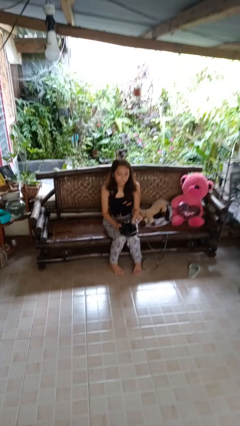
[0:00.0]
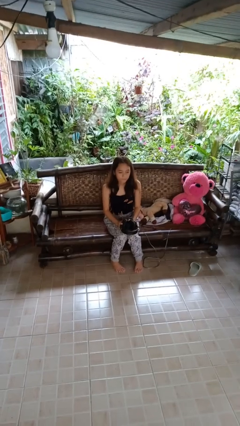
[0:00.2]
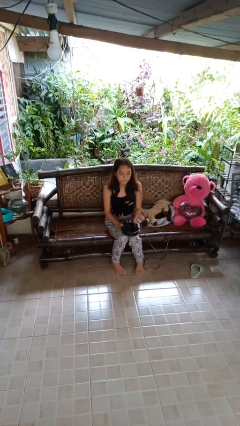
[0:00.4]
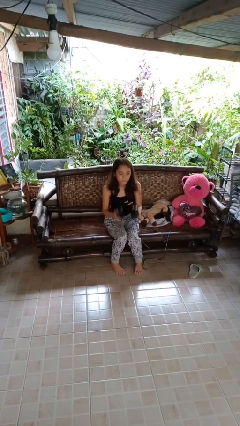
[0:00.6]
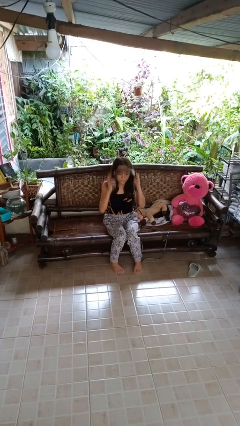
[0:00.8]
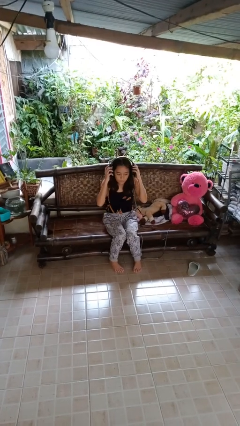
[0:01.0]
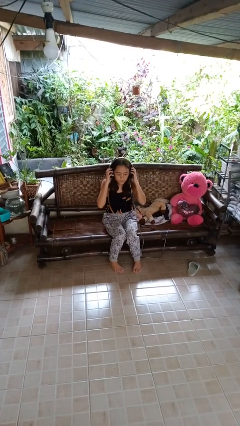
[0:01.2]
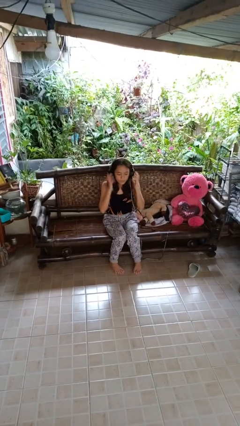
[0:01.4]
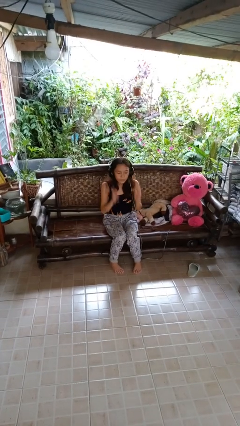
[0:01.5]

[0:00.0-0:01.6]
person puts on headphones

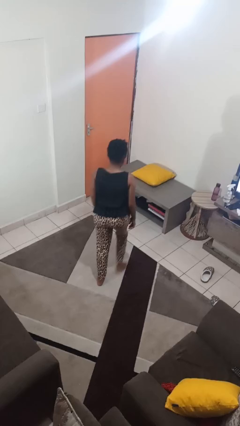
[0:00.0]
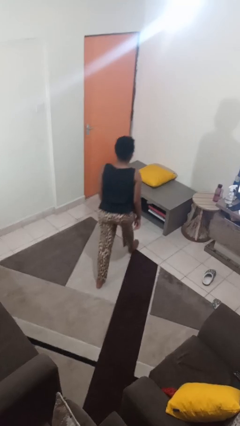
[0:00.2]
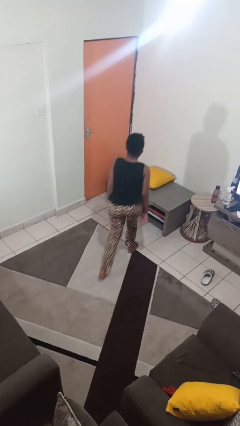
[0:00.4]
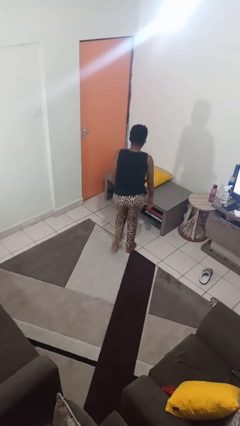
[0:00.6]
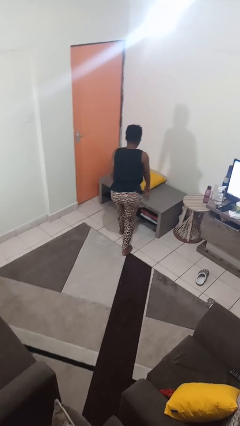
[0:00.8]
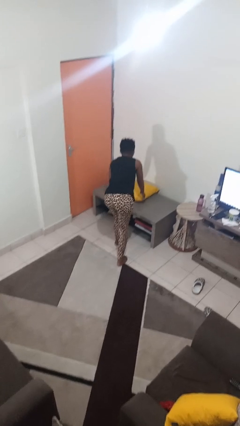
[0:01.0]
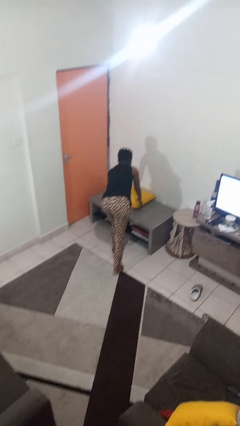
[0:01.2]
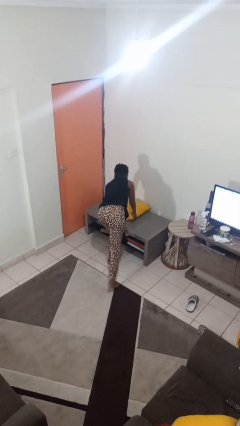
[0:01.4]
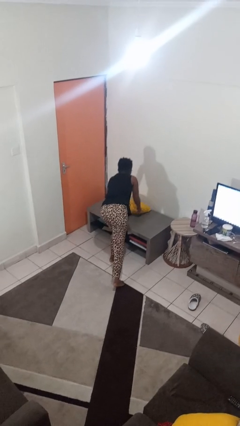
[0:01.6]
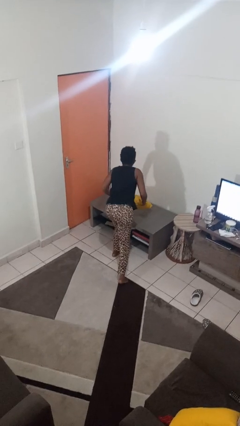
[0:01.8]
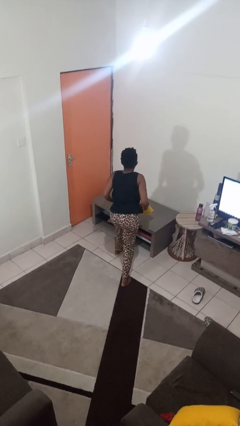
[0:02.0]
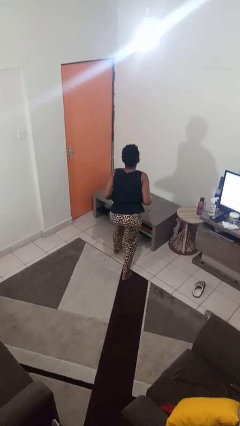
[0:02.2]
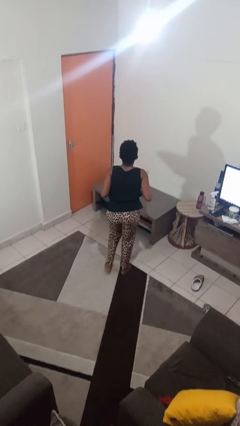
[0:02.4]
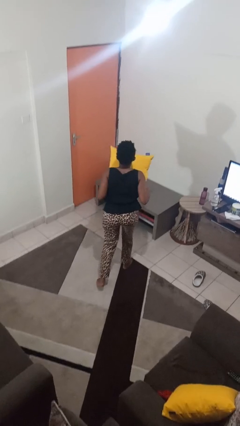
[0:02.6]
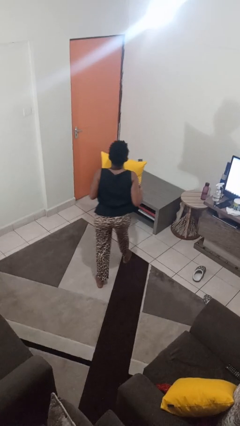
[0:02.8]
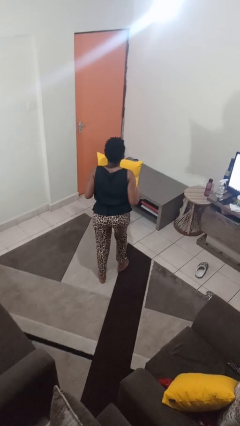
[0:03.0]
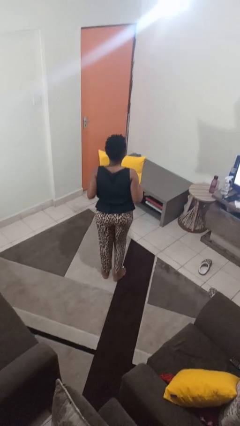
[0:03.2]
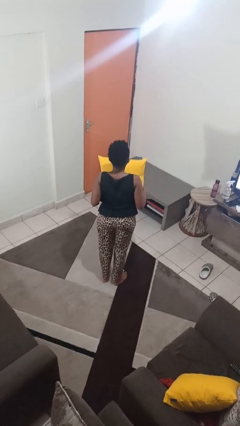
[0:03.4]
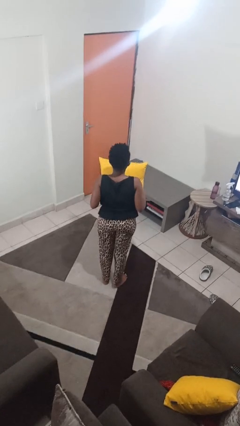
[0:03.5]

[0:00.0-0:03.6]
person picks up object from table

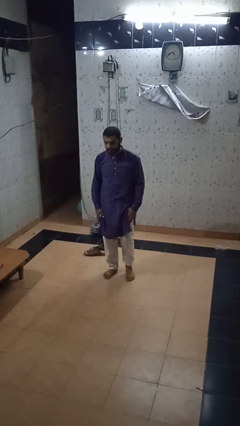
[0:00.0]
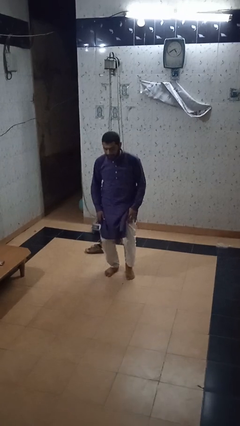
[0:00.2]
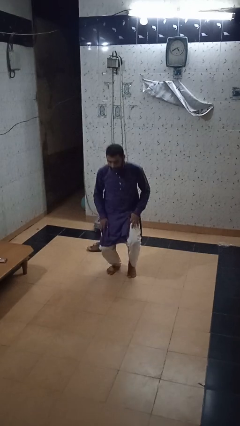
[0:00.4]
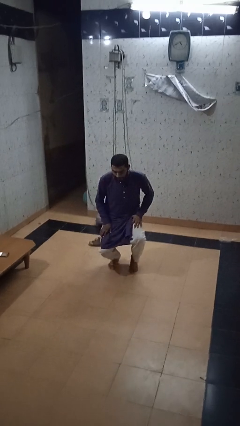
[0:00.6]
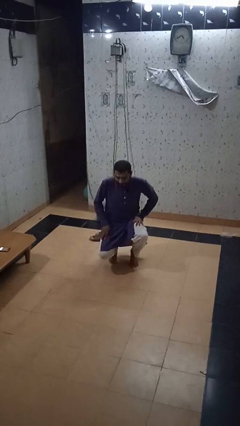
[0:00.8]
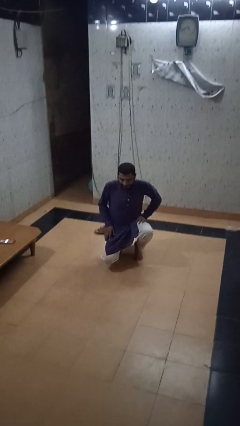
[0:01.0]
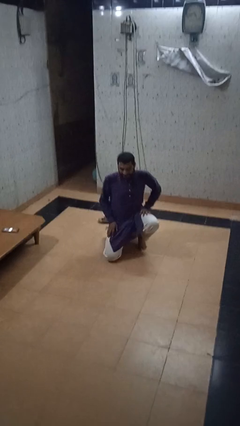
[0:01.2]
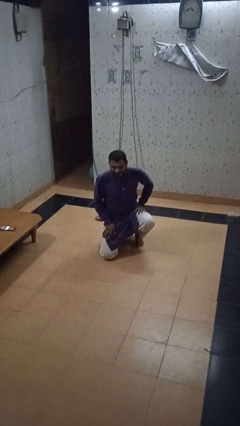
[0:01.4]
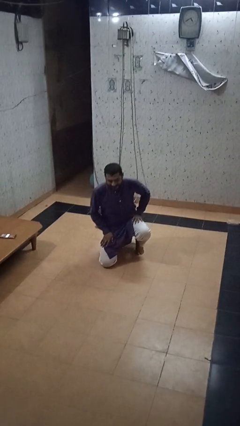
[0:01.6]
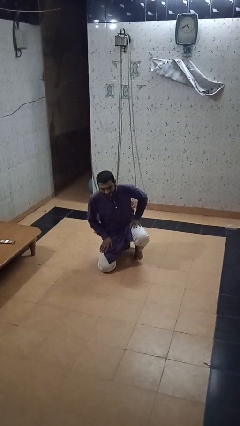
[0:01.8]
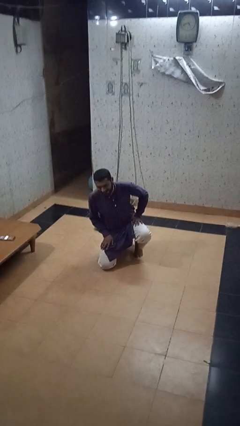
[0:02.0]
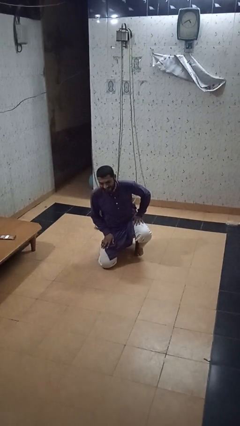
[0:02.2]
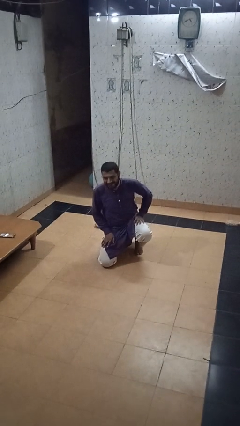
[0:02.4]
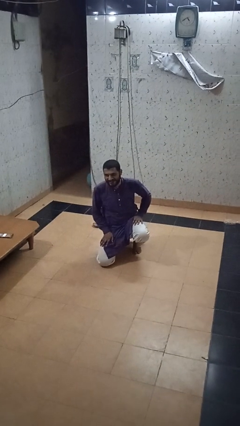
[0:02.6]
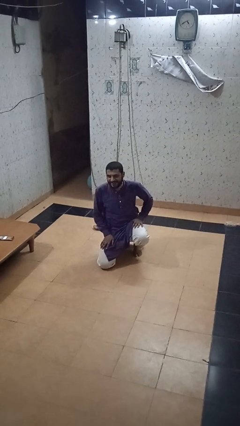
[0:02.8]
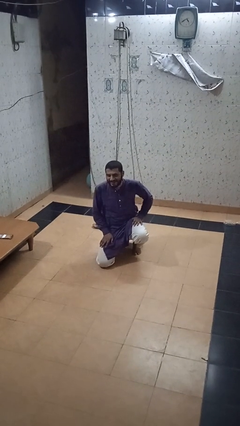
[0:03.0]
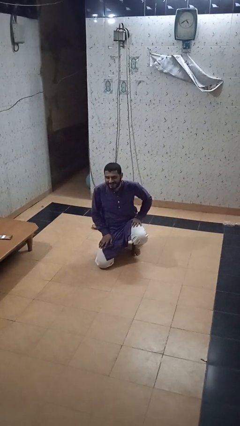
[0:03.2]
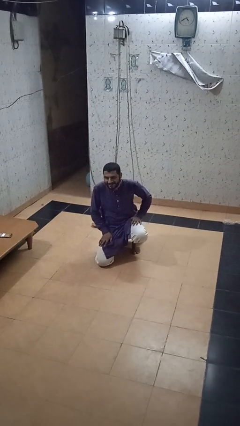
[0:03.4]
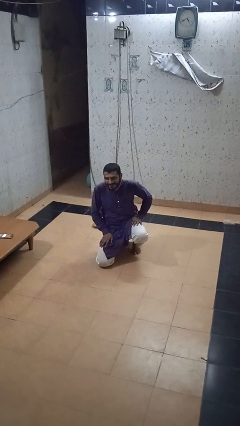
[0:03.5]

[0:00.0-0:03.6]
person kneels

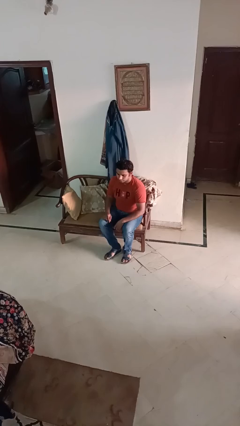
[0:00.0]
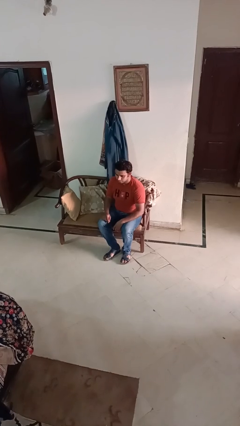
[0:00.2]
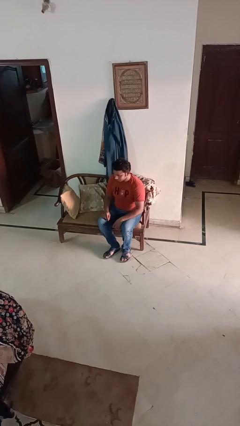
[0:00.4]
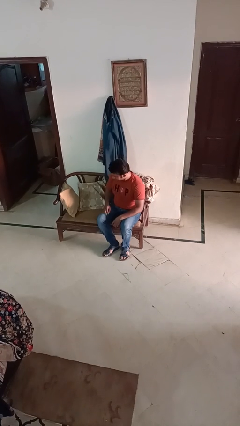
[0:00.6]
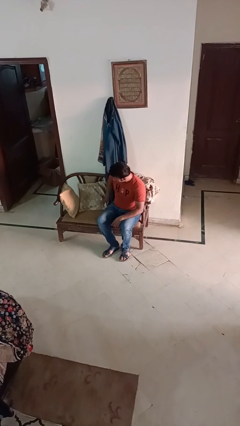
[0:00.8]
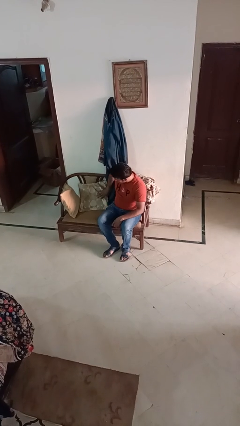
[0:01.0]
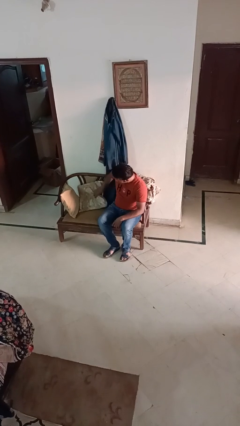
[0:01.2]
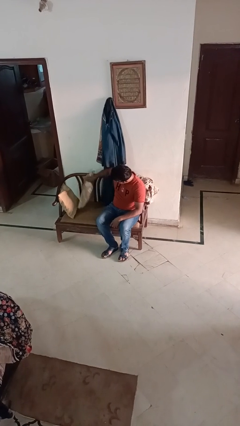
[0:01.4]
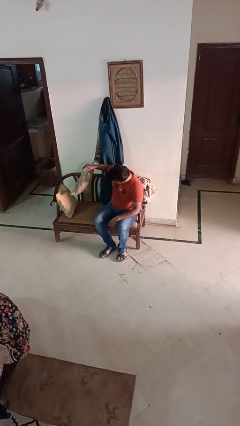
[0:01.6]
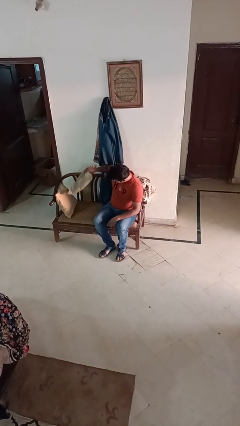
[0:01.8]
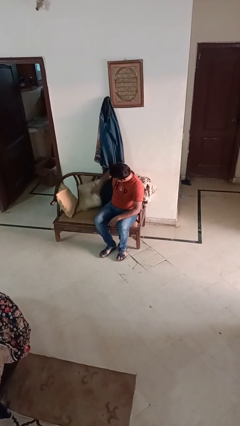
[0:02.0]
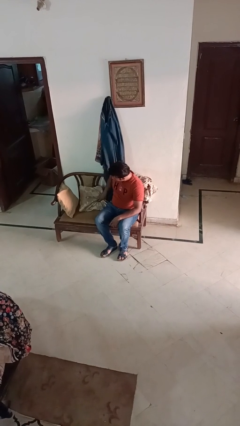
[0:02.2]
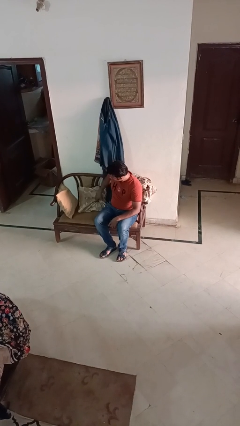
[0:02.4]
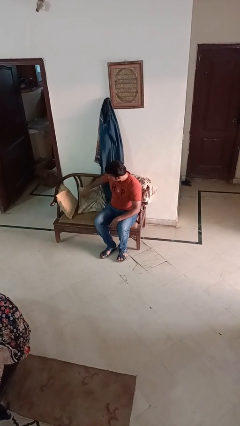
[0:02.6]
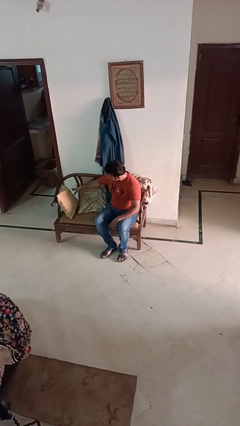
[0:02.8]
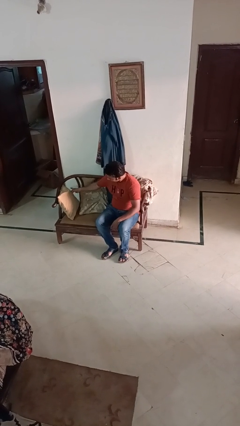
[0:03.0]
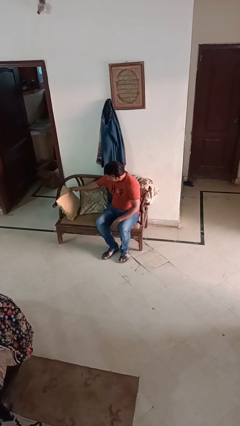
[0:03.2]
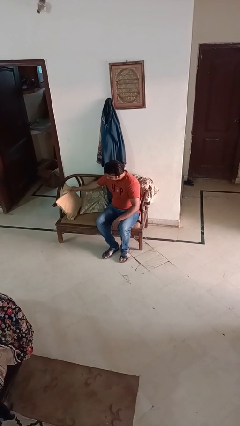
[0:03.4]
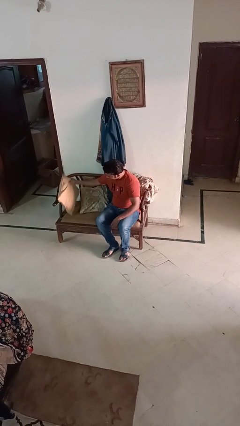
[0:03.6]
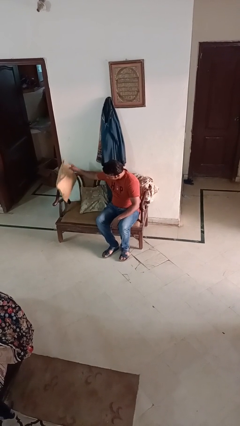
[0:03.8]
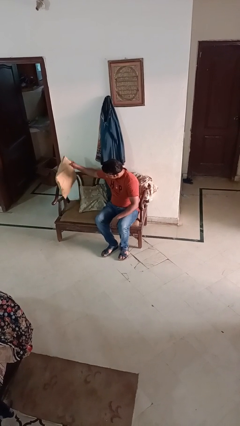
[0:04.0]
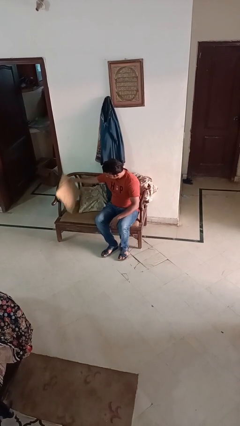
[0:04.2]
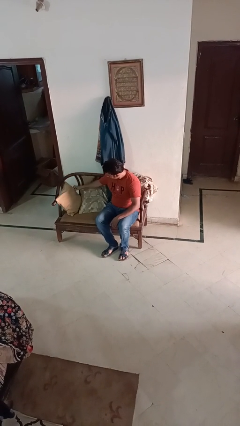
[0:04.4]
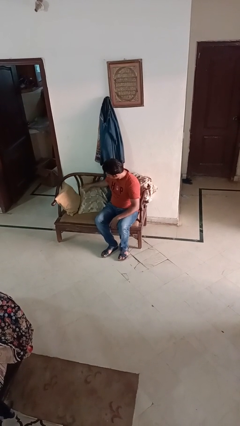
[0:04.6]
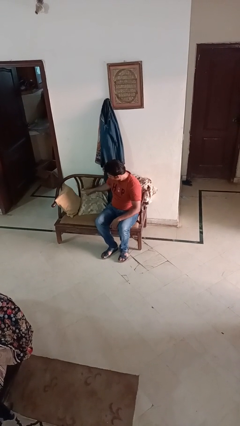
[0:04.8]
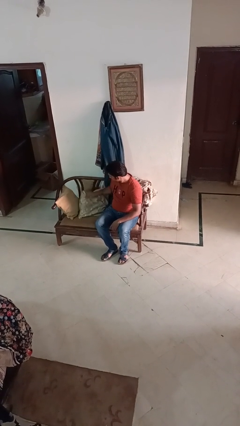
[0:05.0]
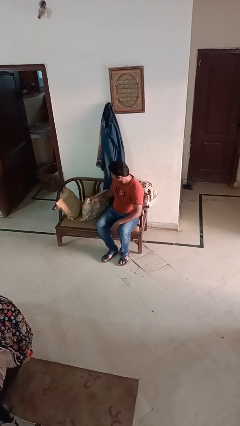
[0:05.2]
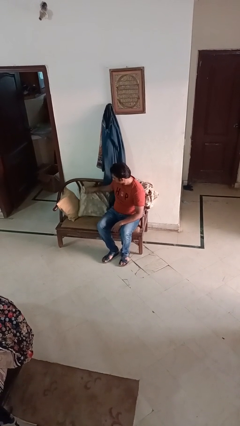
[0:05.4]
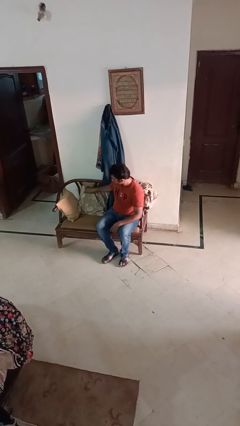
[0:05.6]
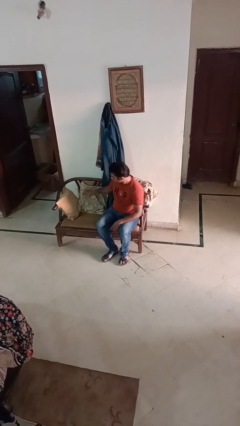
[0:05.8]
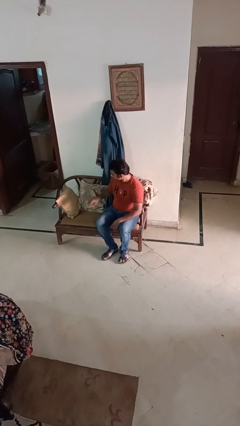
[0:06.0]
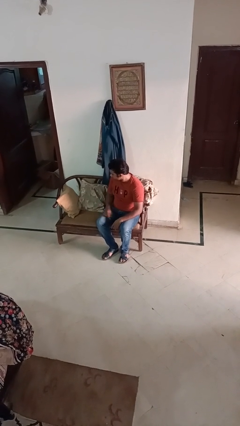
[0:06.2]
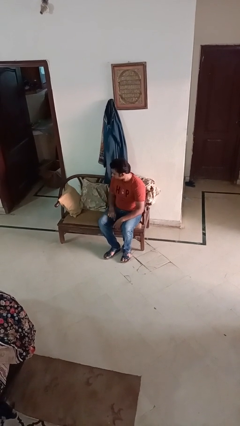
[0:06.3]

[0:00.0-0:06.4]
person searches in couch

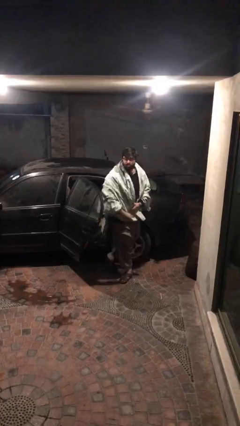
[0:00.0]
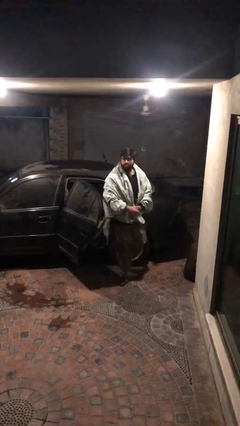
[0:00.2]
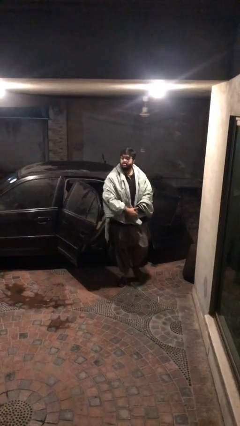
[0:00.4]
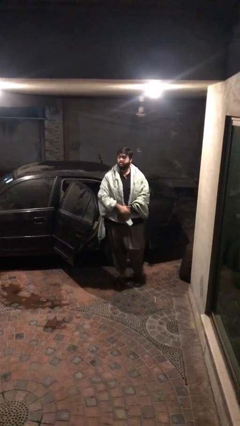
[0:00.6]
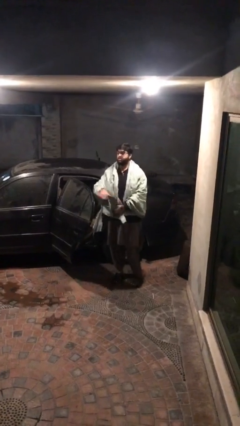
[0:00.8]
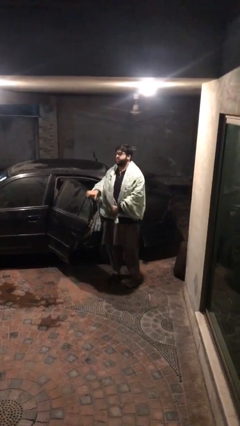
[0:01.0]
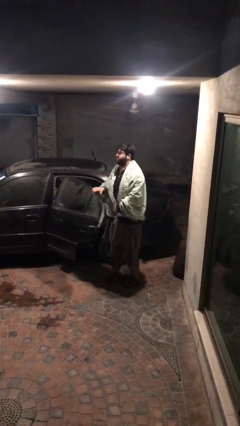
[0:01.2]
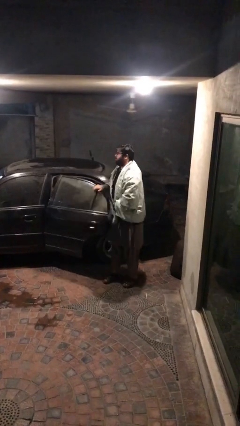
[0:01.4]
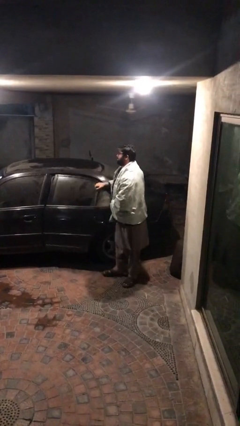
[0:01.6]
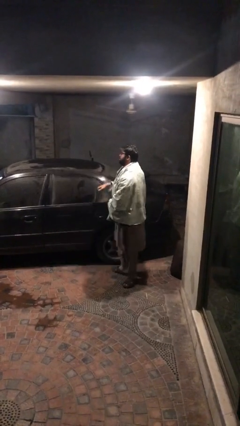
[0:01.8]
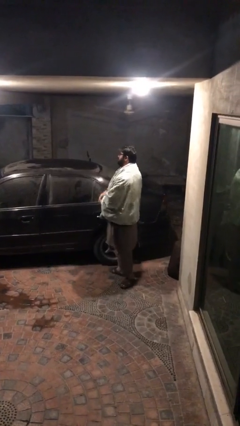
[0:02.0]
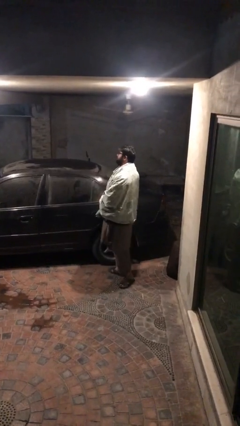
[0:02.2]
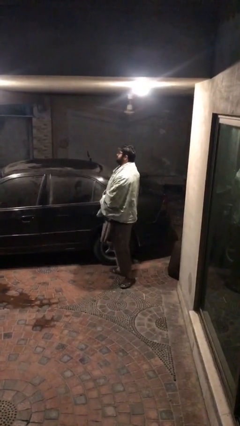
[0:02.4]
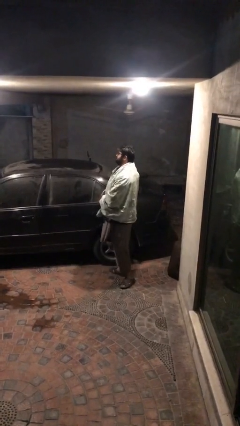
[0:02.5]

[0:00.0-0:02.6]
person closes car door
